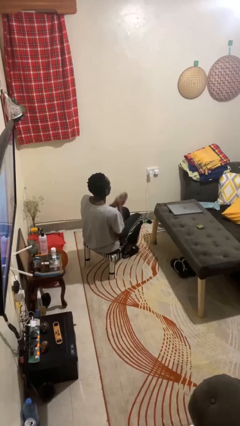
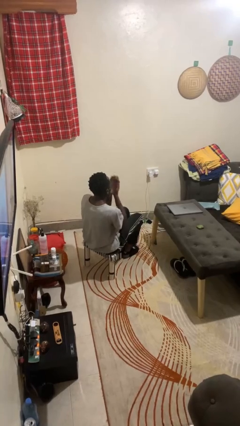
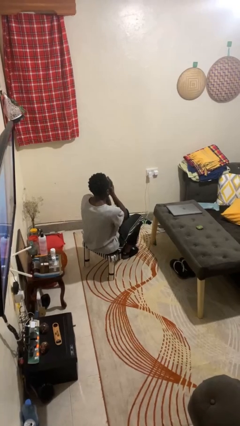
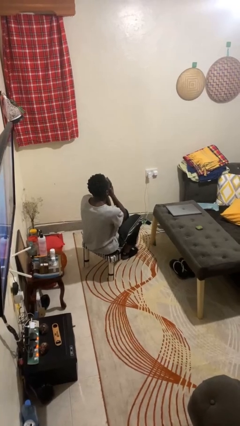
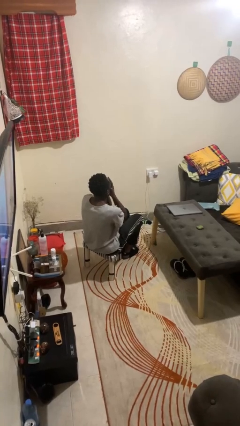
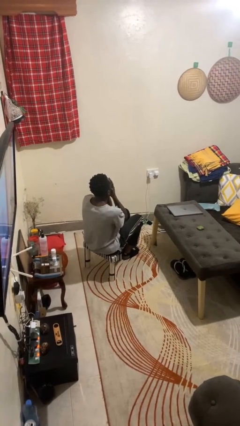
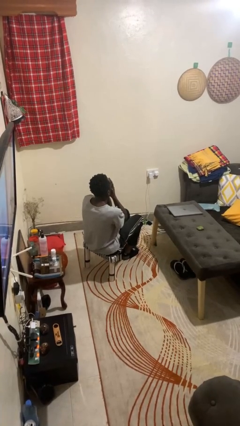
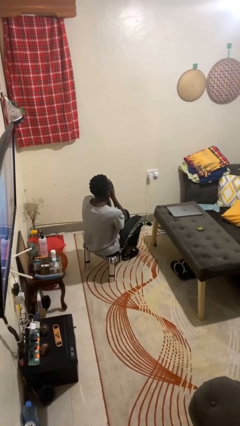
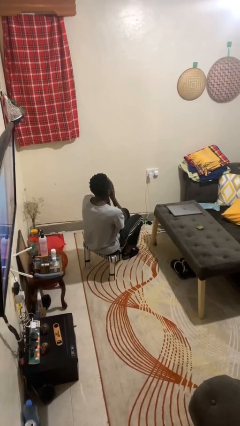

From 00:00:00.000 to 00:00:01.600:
person covers face with hands

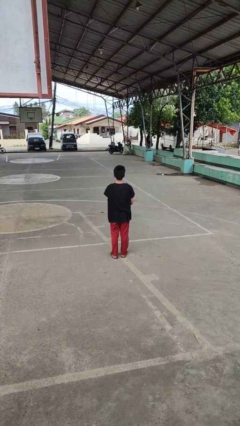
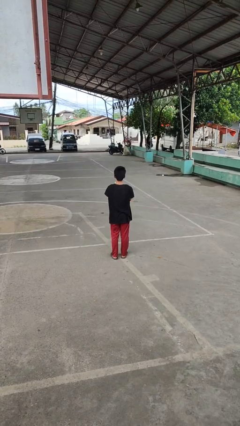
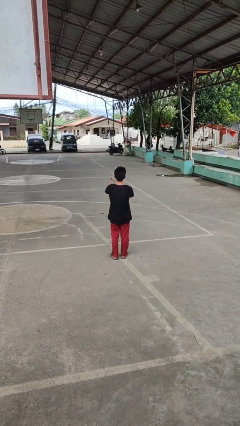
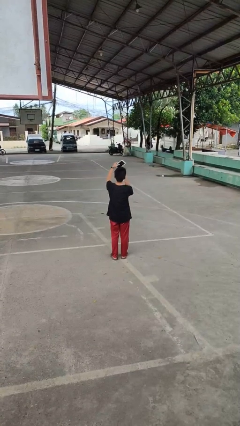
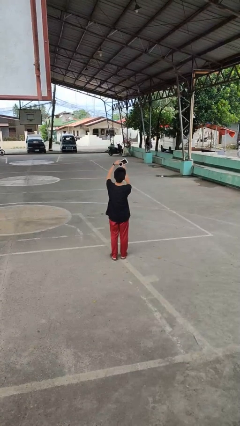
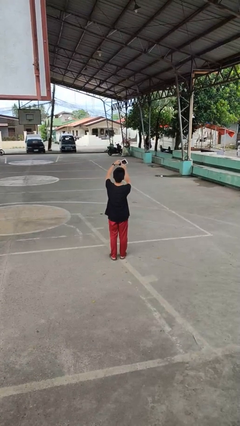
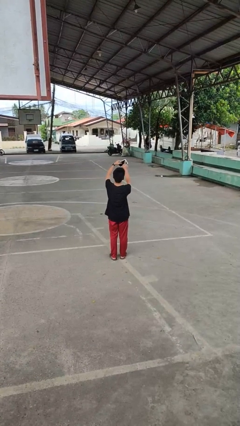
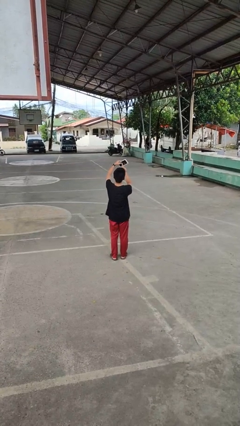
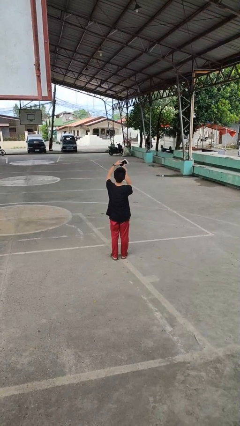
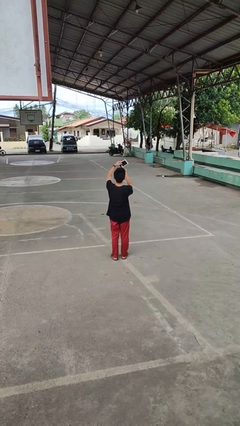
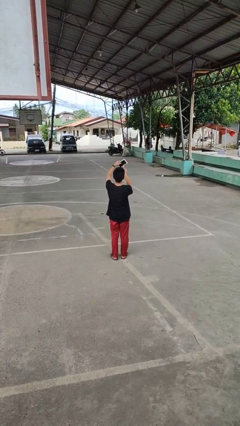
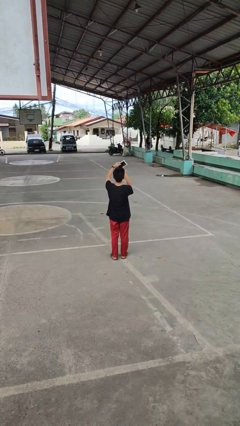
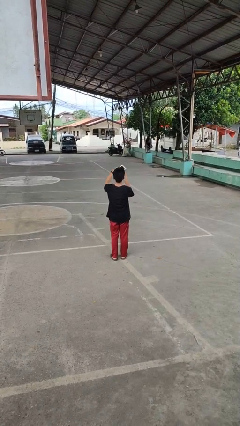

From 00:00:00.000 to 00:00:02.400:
person interacts with tablet

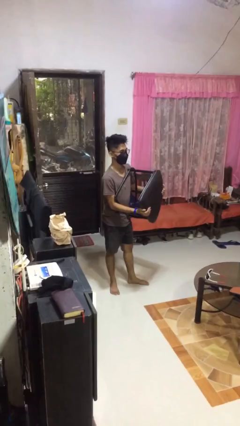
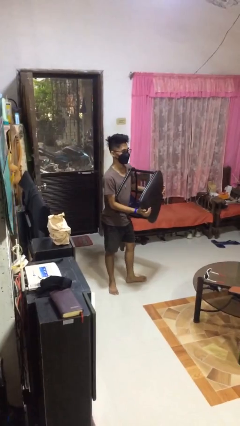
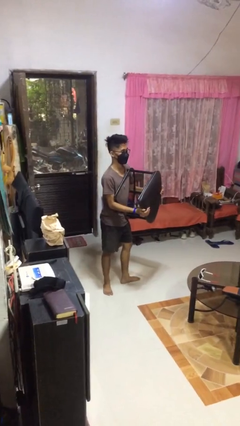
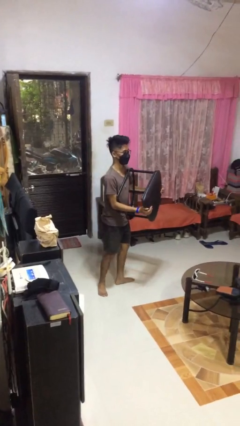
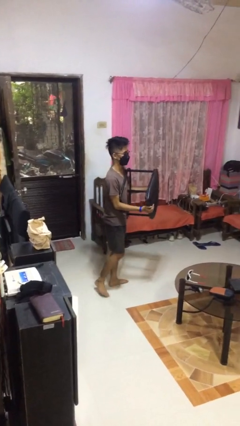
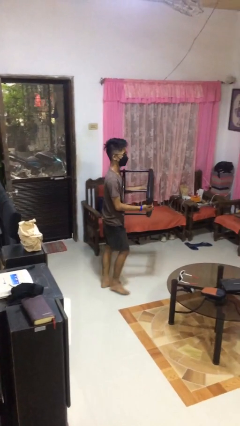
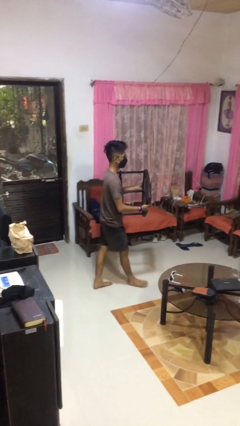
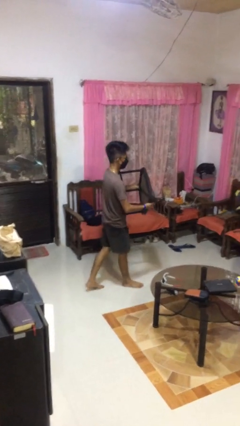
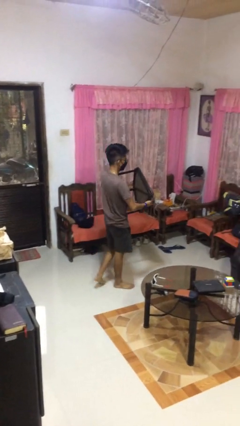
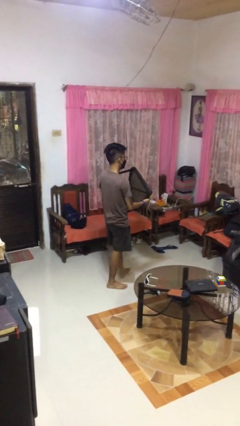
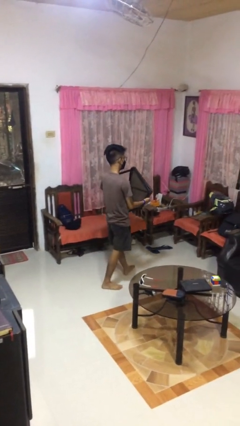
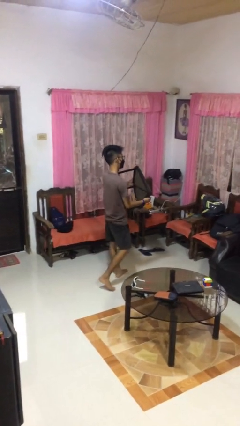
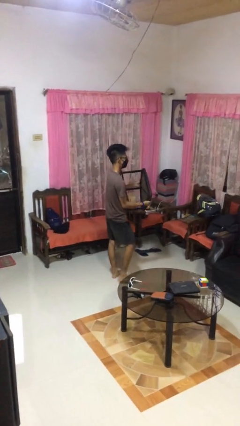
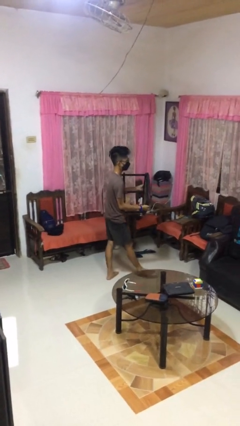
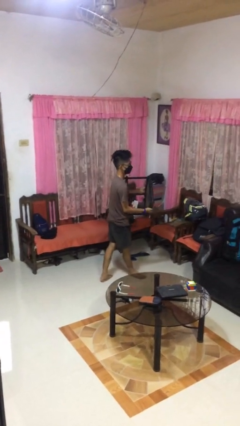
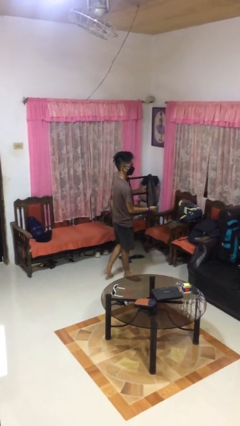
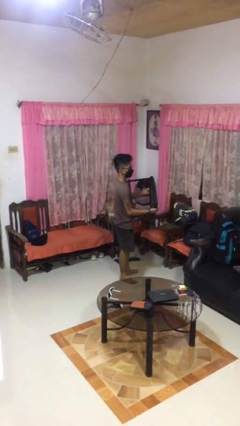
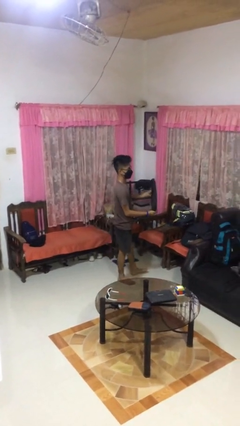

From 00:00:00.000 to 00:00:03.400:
person carries furniture

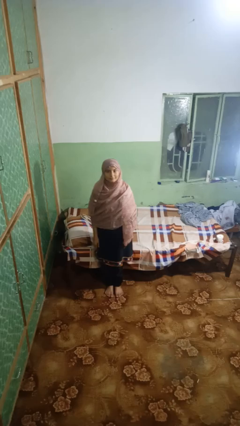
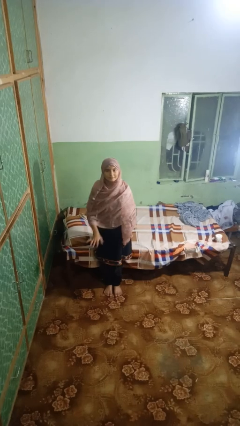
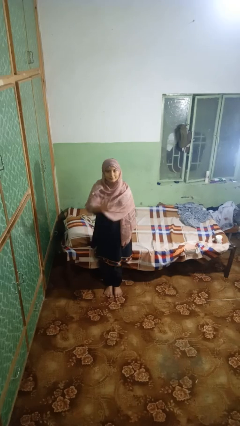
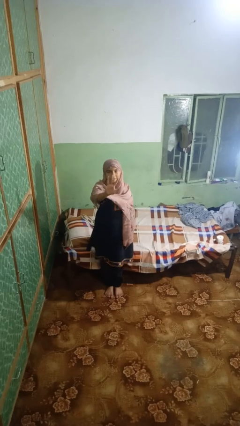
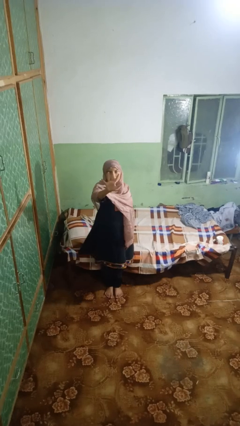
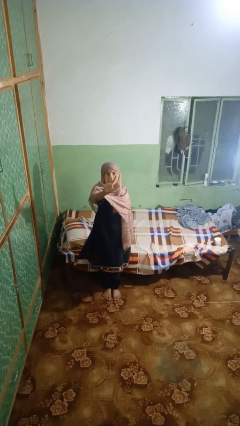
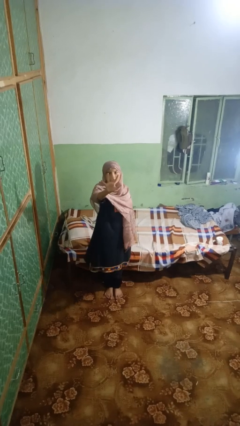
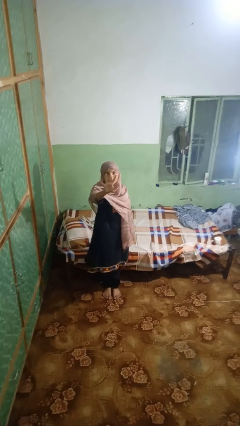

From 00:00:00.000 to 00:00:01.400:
person gestures number five

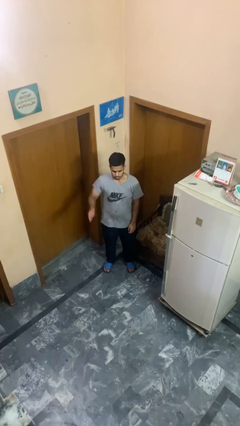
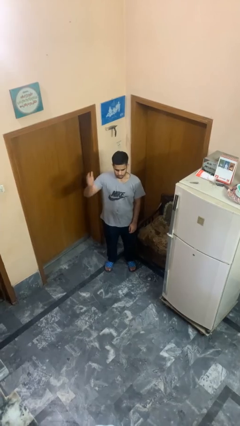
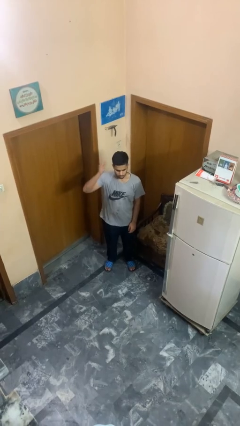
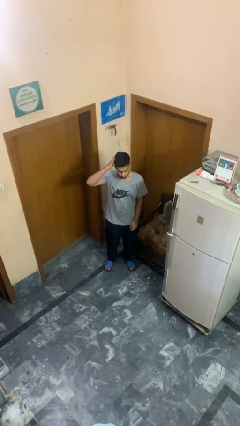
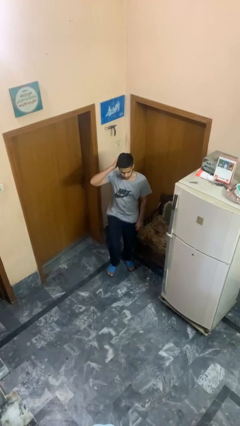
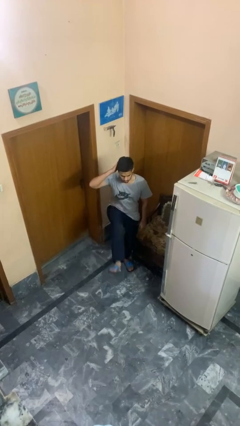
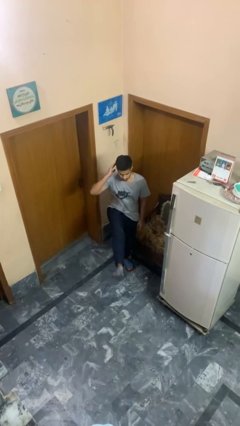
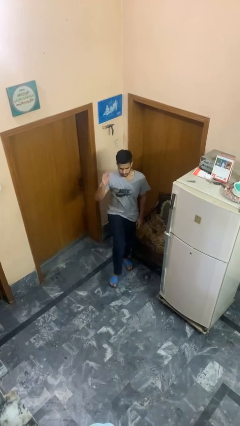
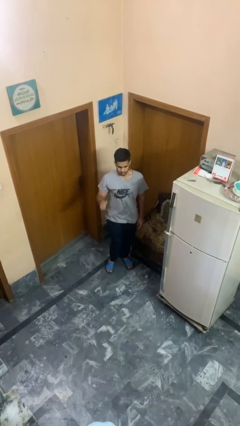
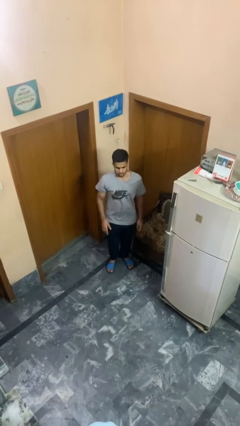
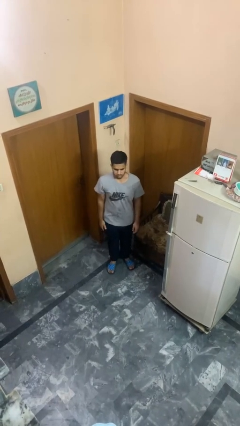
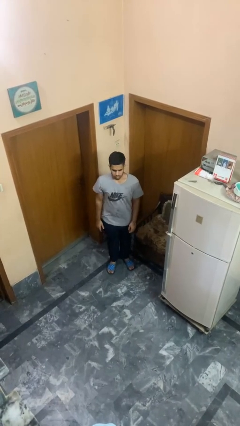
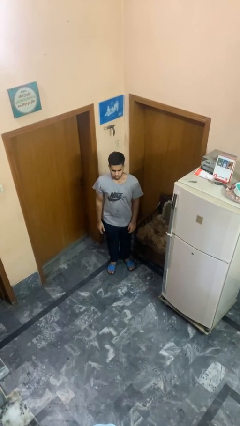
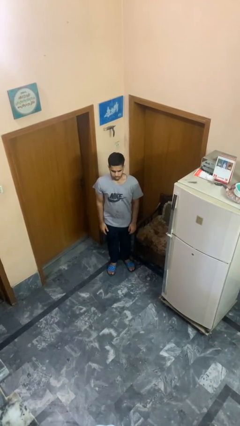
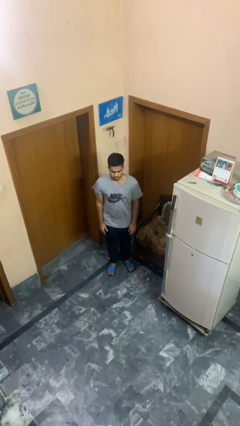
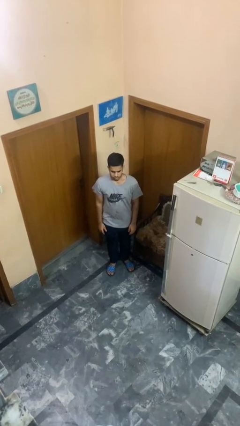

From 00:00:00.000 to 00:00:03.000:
person karate kicks

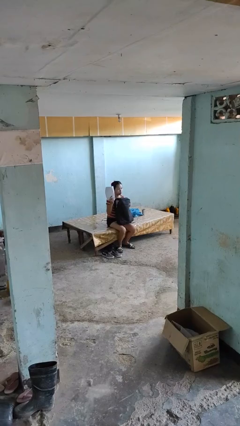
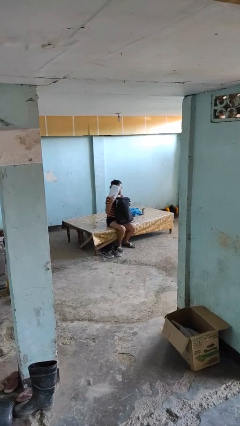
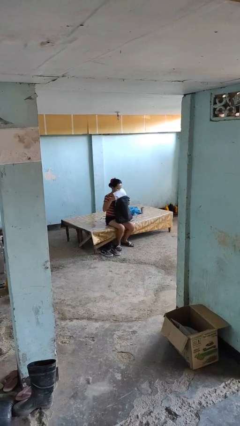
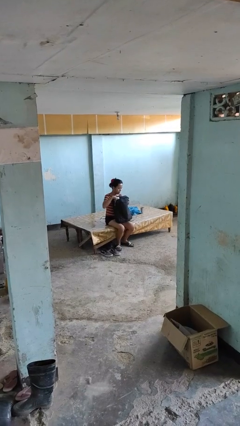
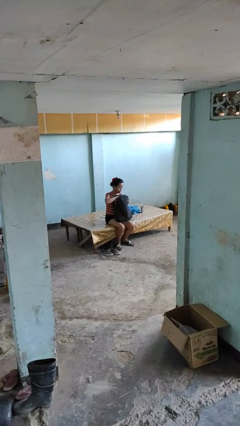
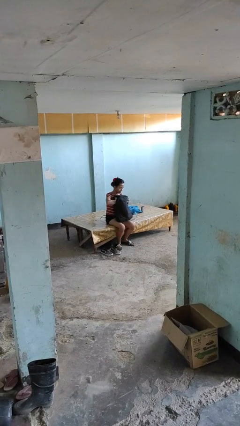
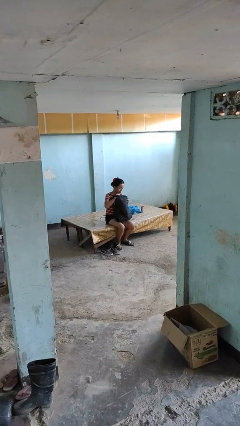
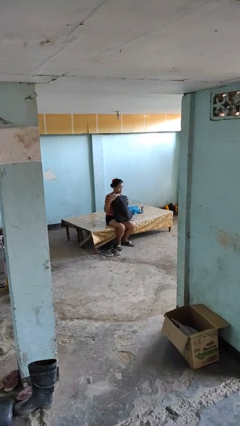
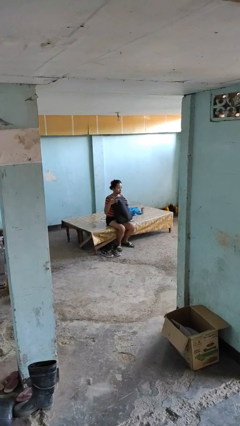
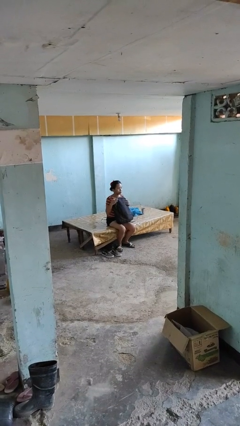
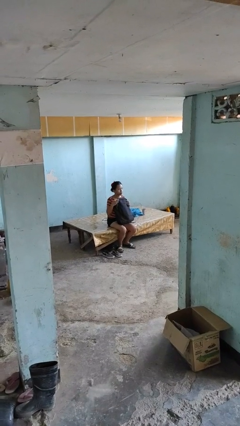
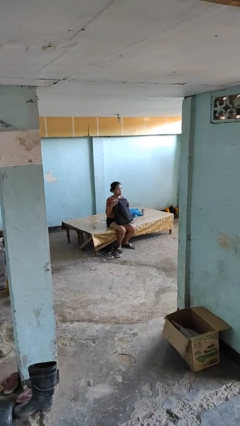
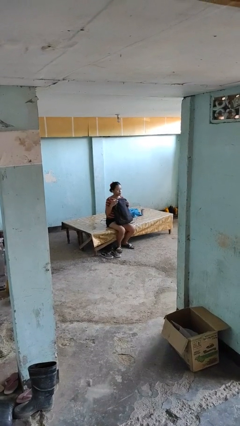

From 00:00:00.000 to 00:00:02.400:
person puts object into backpack

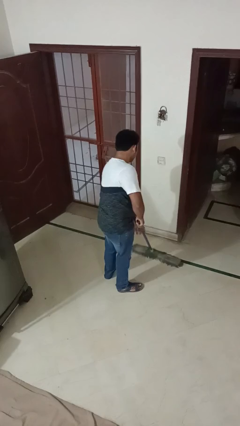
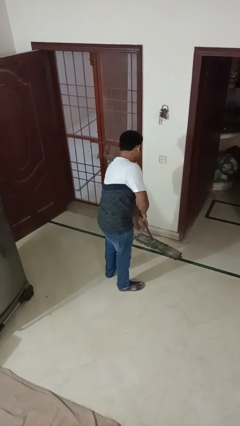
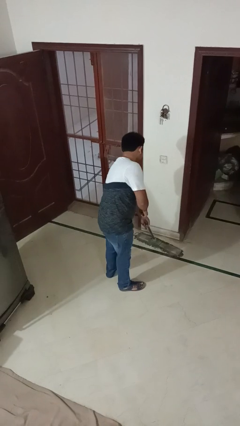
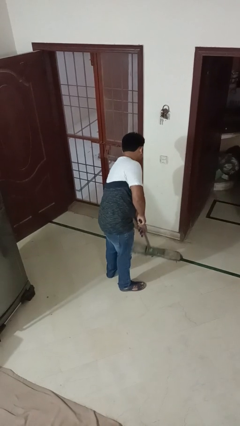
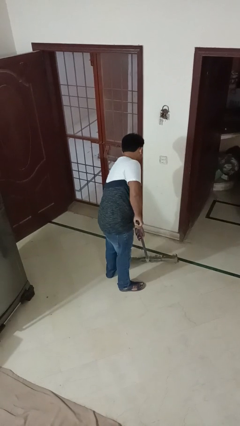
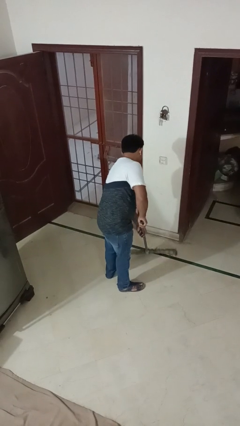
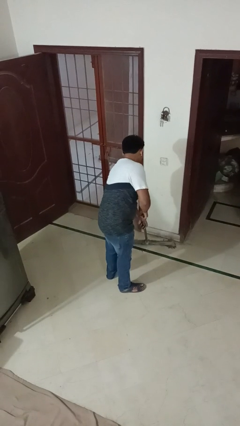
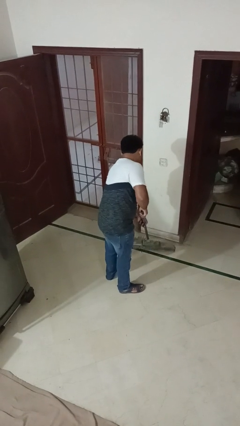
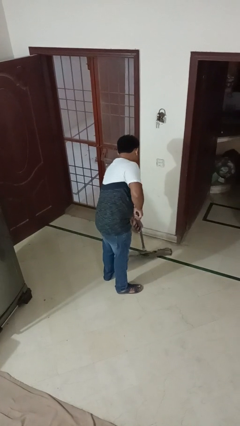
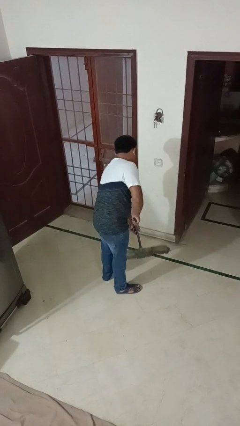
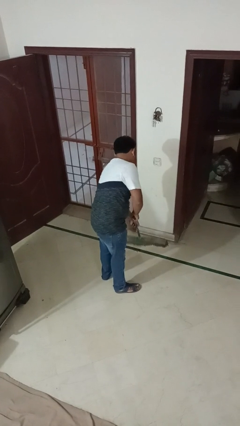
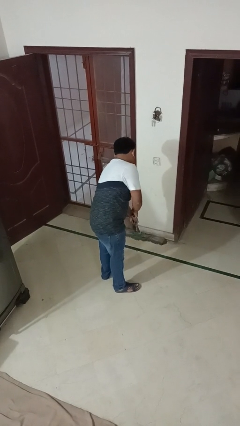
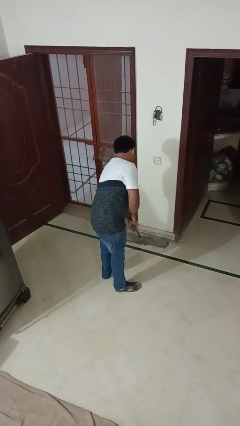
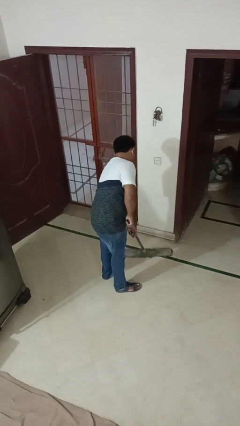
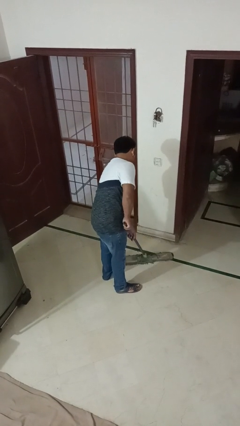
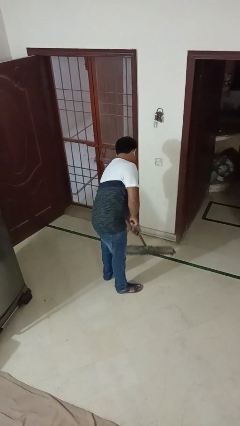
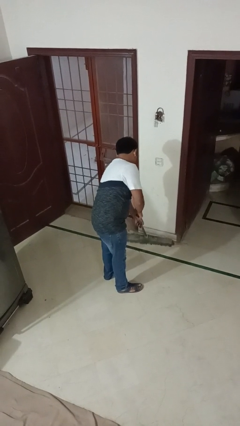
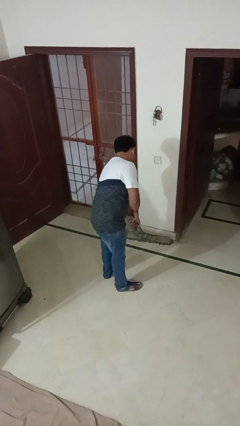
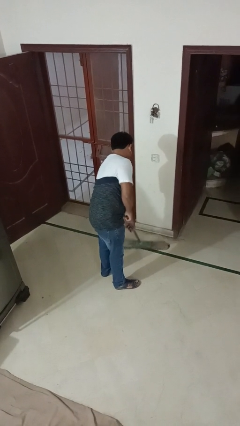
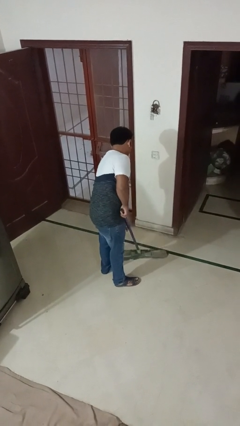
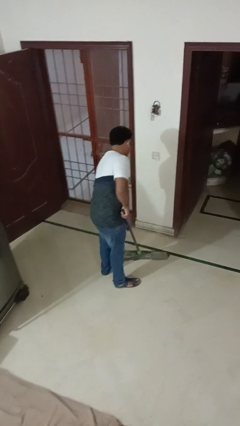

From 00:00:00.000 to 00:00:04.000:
person mops
